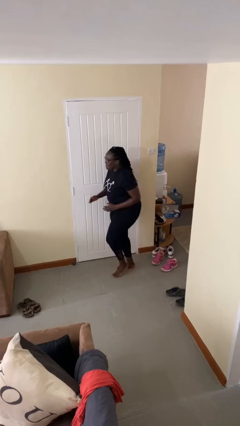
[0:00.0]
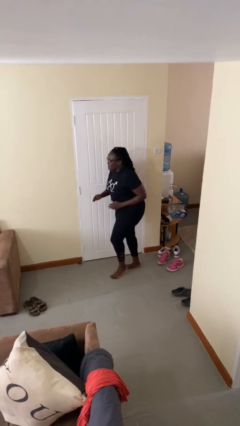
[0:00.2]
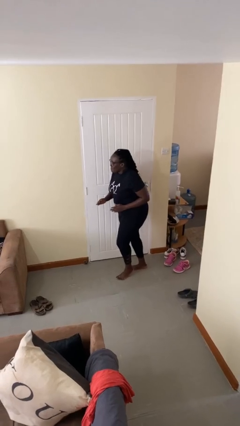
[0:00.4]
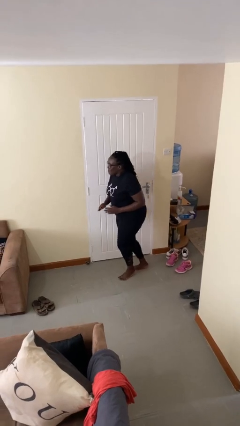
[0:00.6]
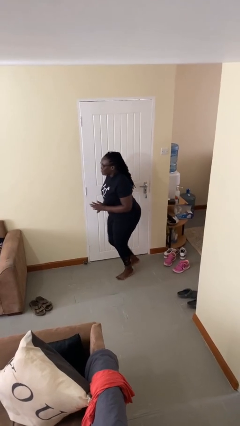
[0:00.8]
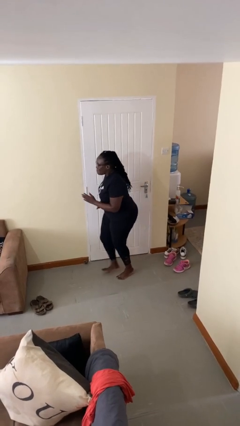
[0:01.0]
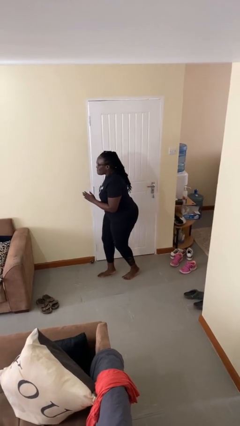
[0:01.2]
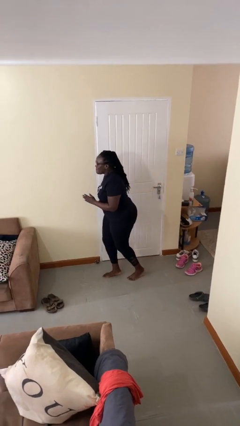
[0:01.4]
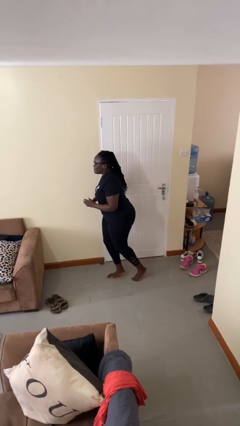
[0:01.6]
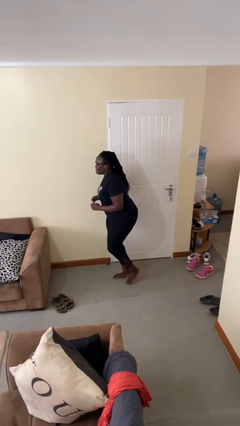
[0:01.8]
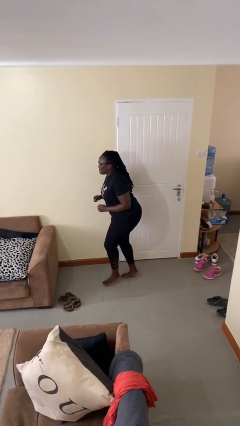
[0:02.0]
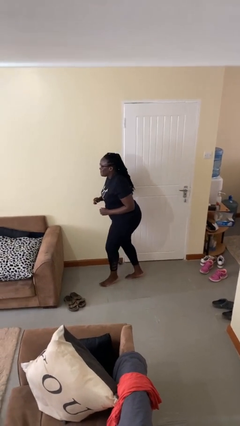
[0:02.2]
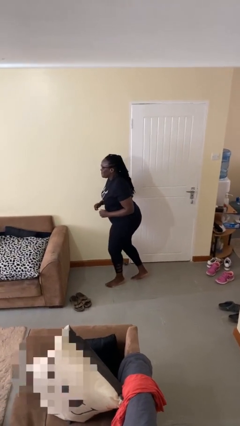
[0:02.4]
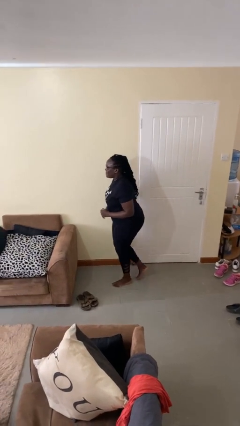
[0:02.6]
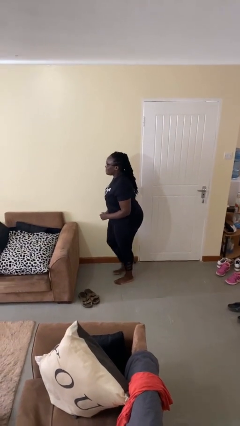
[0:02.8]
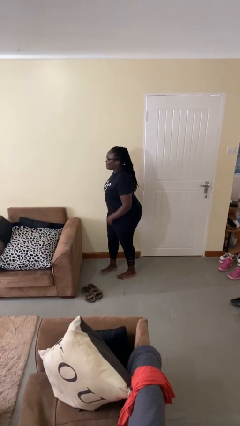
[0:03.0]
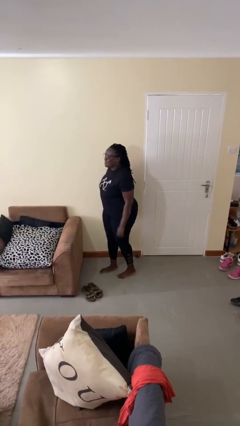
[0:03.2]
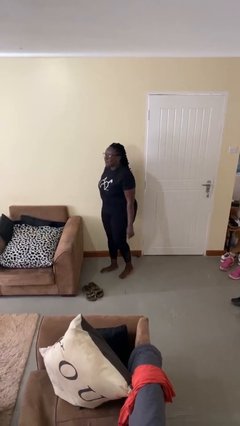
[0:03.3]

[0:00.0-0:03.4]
person walks tiptoe

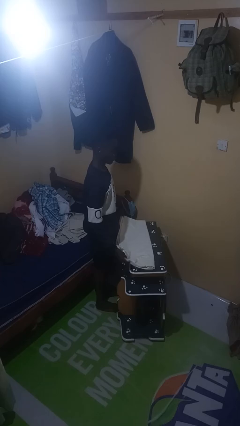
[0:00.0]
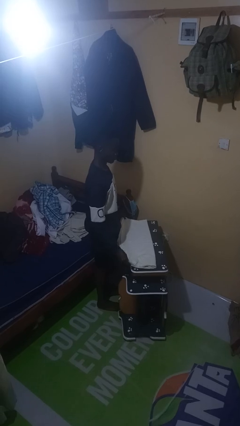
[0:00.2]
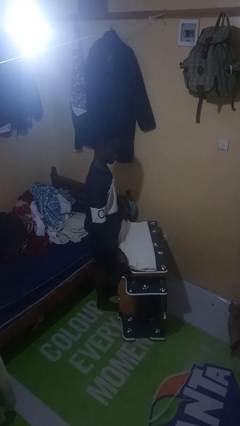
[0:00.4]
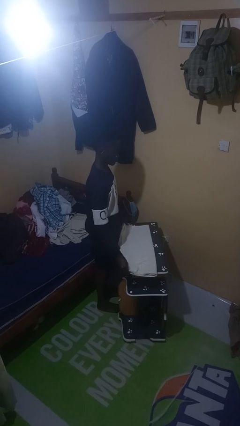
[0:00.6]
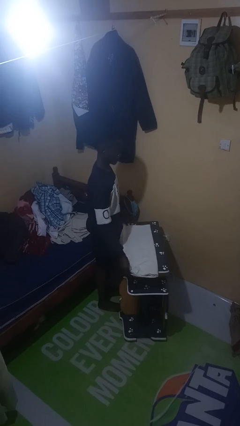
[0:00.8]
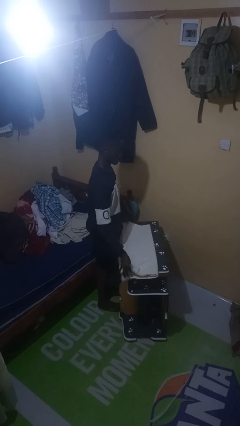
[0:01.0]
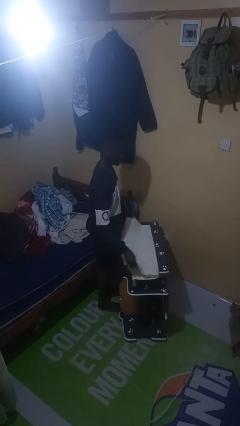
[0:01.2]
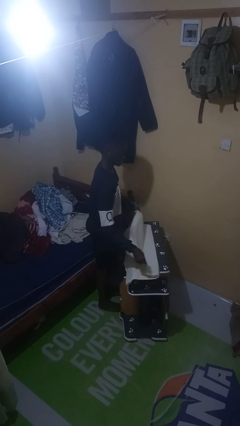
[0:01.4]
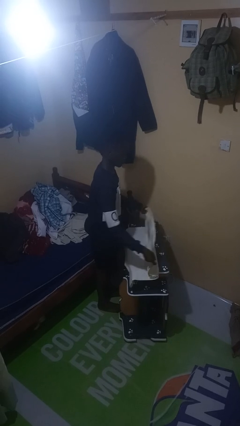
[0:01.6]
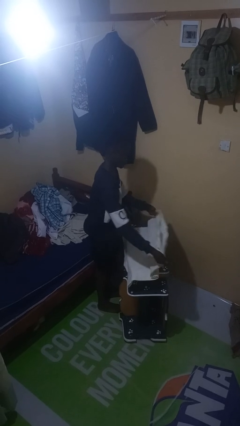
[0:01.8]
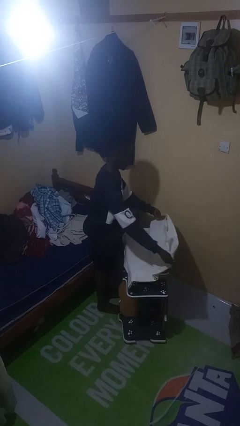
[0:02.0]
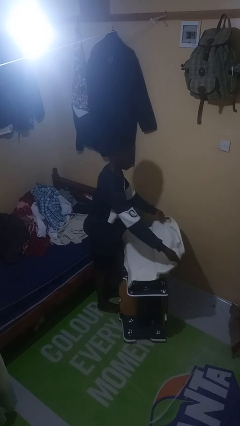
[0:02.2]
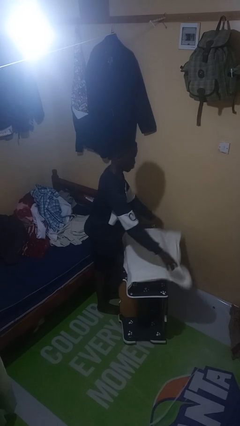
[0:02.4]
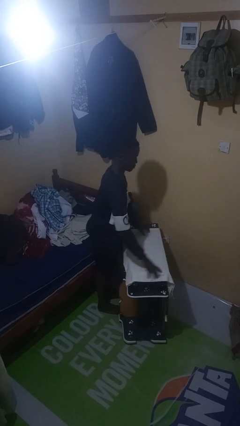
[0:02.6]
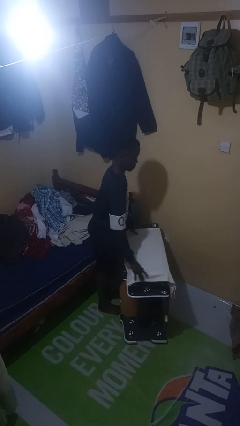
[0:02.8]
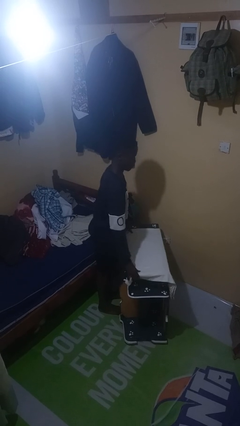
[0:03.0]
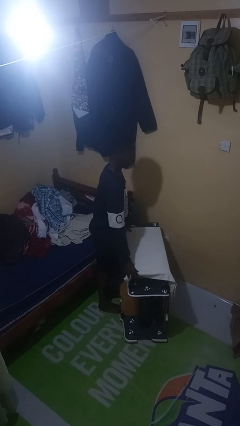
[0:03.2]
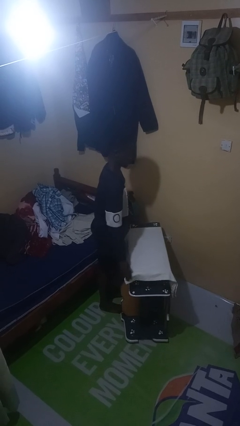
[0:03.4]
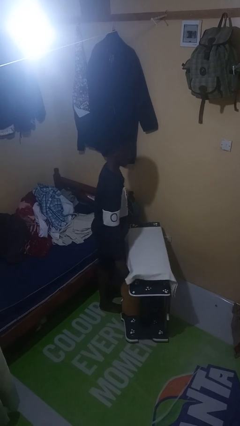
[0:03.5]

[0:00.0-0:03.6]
person spreads tablecloth

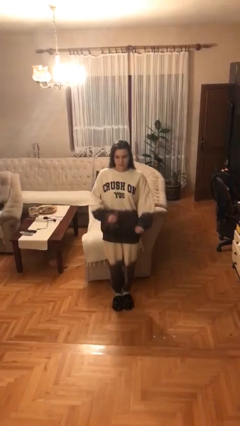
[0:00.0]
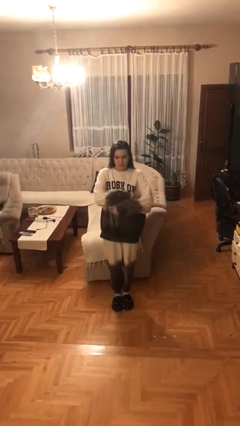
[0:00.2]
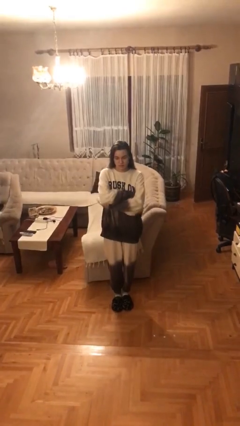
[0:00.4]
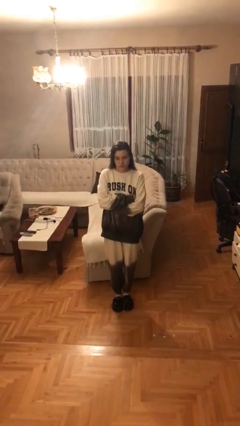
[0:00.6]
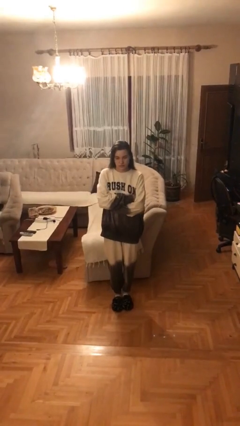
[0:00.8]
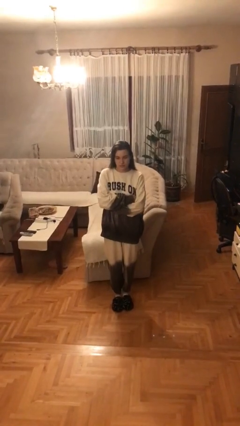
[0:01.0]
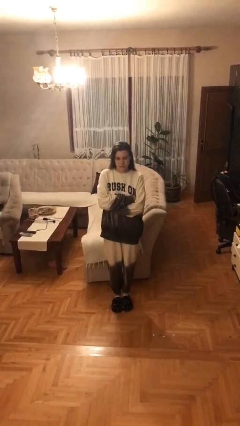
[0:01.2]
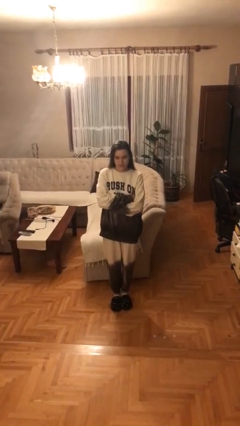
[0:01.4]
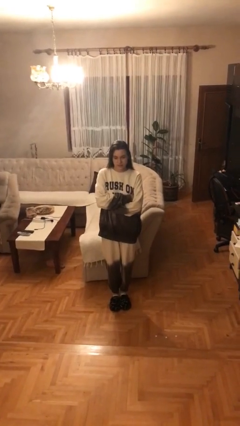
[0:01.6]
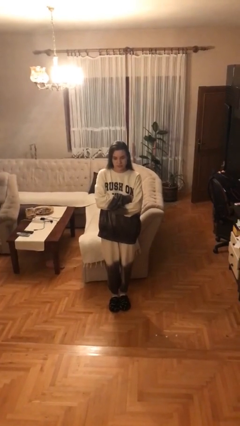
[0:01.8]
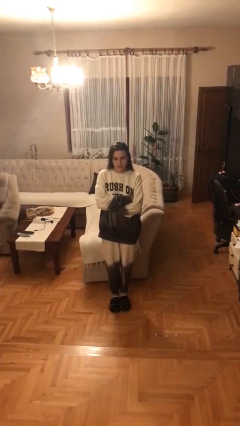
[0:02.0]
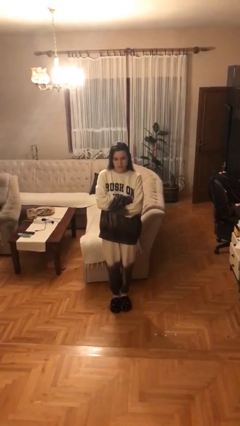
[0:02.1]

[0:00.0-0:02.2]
person crosses arms

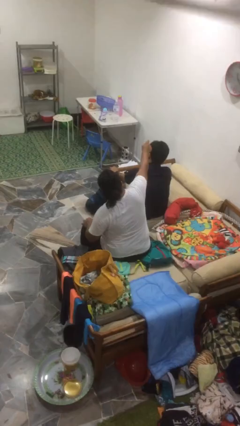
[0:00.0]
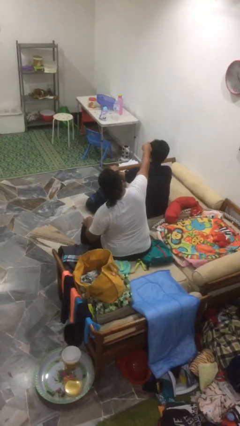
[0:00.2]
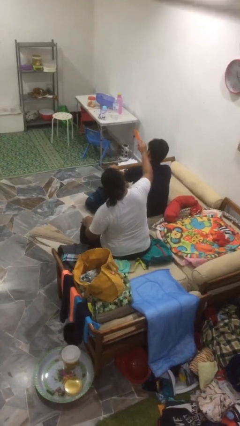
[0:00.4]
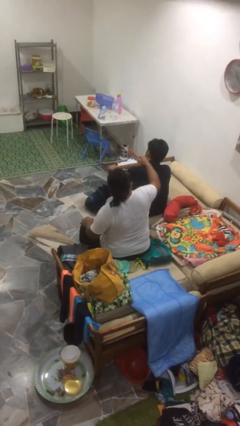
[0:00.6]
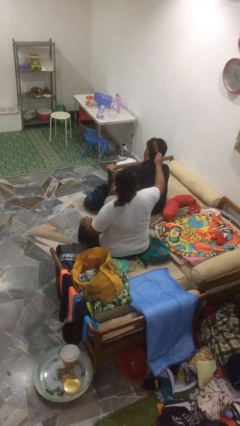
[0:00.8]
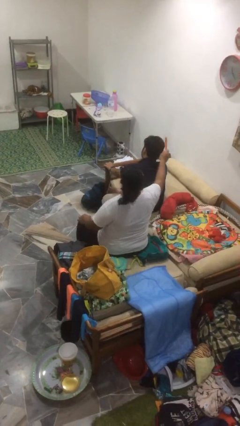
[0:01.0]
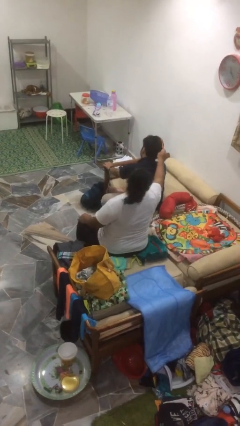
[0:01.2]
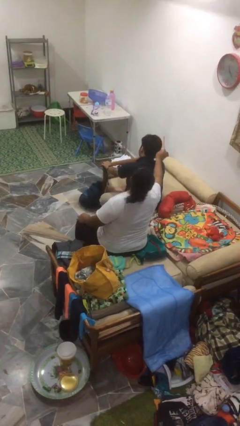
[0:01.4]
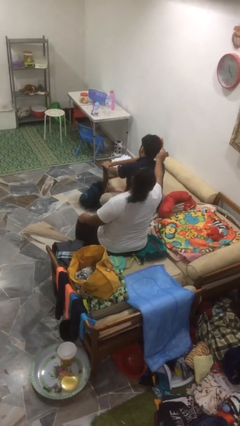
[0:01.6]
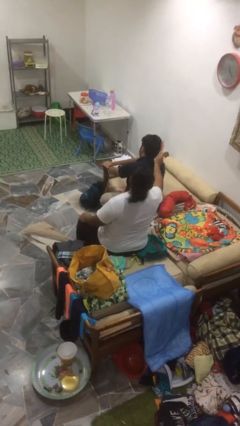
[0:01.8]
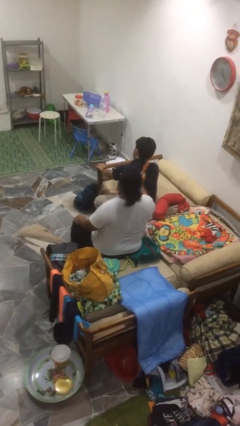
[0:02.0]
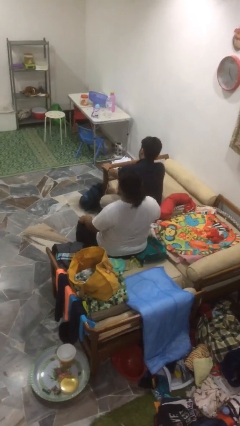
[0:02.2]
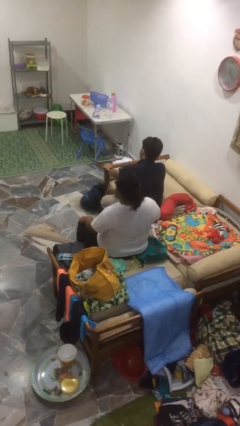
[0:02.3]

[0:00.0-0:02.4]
person brushes hair of person

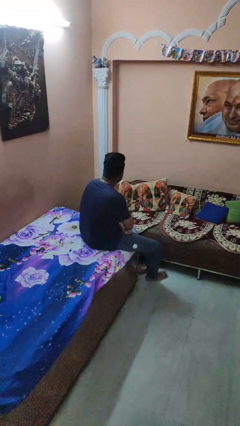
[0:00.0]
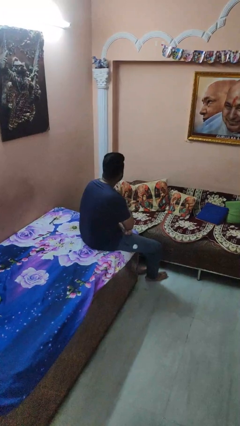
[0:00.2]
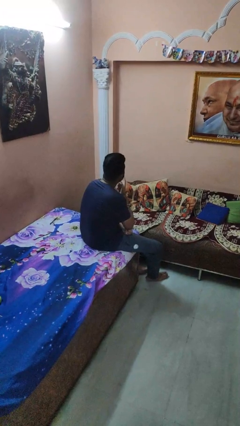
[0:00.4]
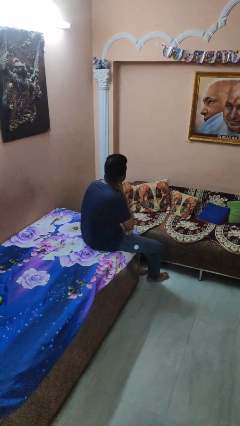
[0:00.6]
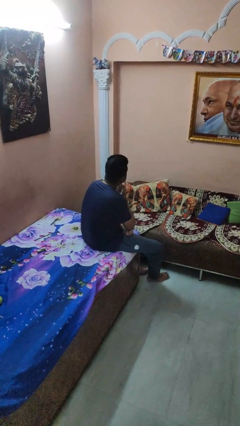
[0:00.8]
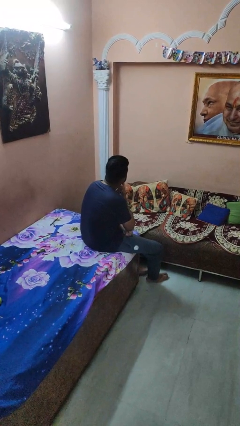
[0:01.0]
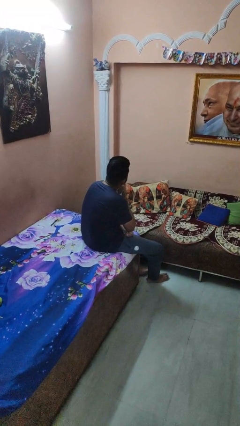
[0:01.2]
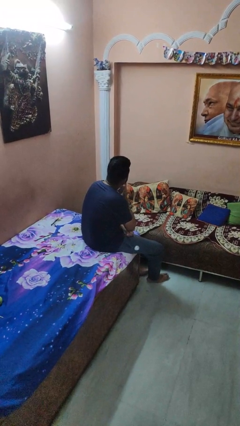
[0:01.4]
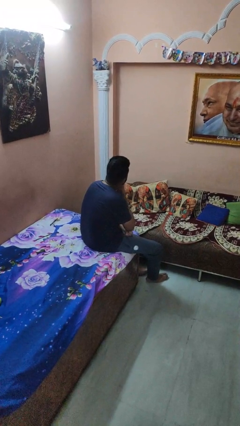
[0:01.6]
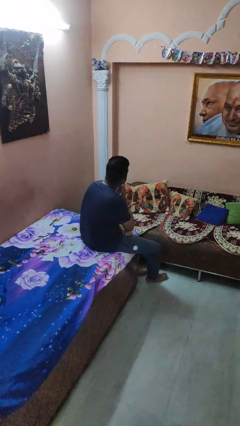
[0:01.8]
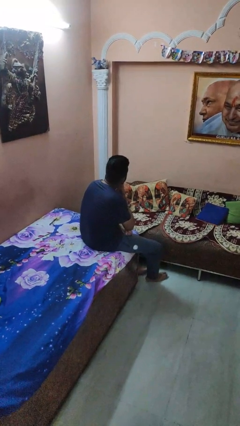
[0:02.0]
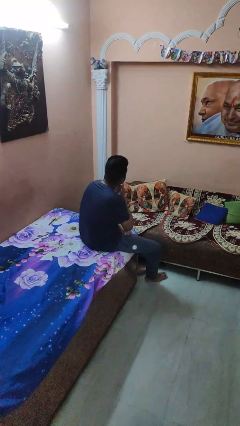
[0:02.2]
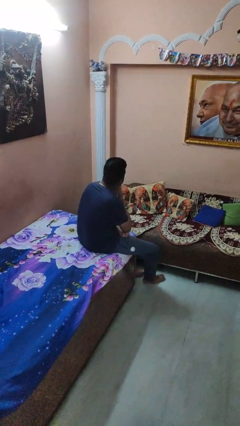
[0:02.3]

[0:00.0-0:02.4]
person strokes chin

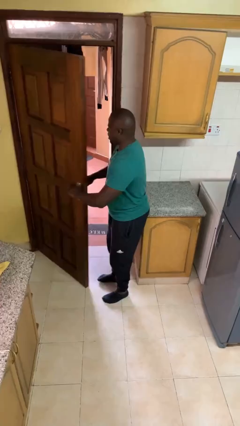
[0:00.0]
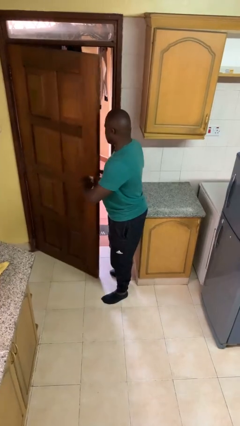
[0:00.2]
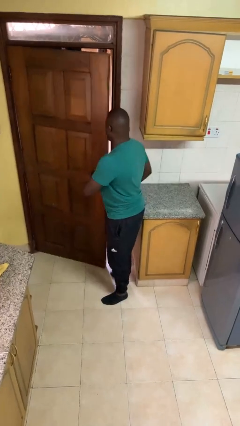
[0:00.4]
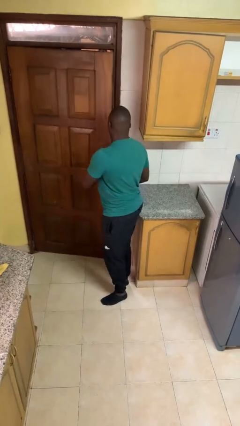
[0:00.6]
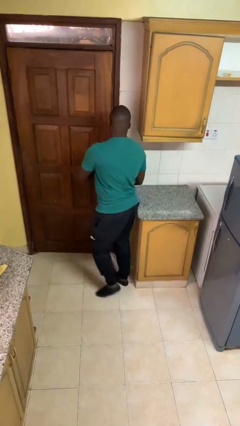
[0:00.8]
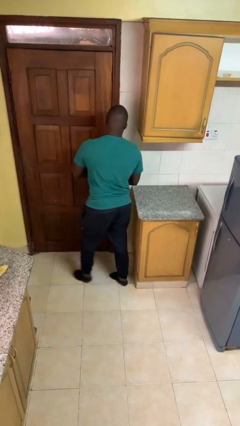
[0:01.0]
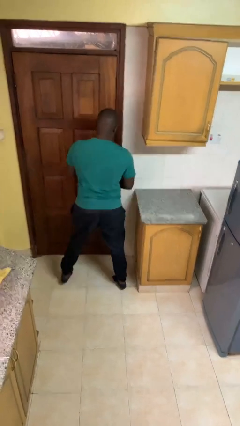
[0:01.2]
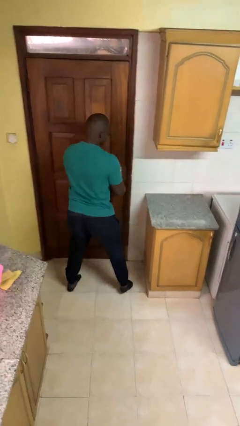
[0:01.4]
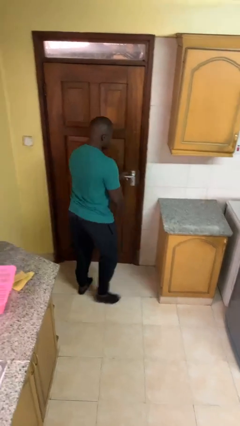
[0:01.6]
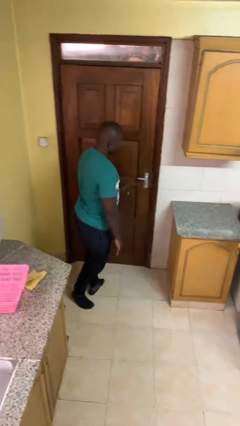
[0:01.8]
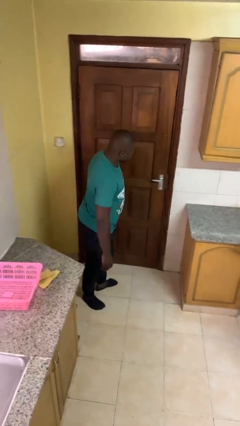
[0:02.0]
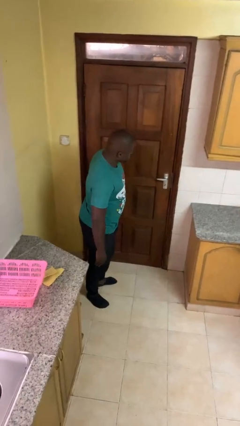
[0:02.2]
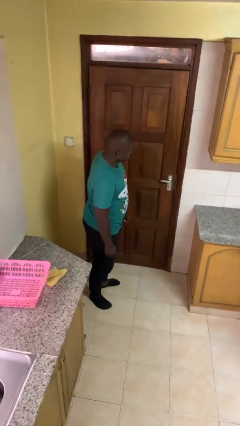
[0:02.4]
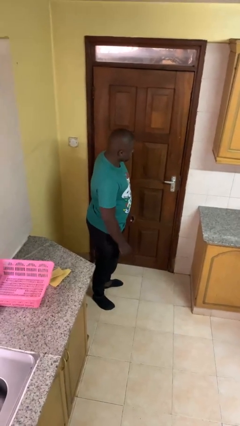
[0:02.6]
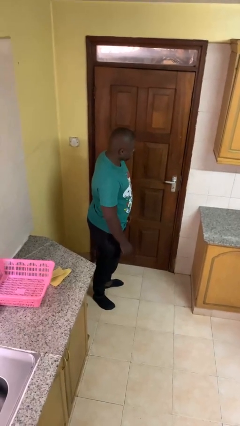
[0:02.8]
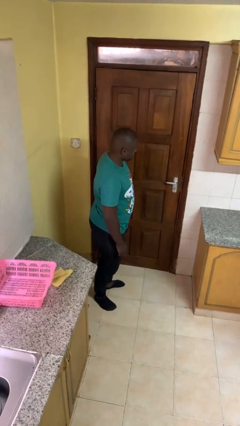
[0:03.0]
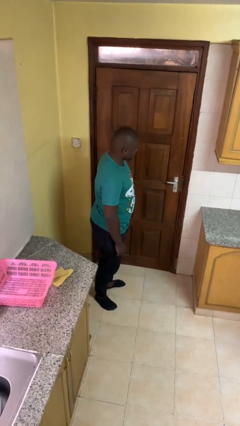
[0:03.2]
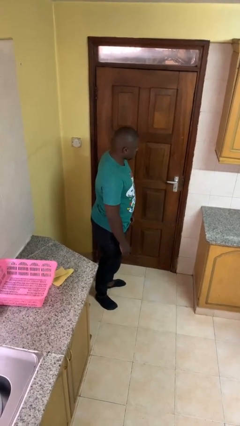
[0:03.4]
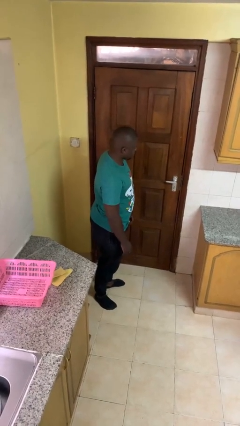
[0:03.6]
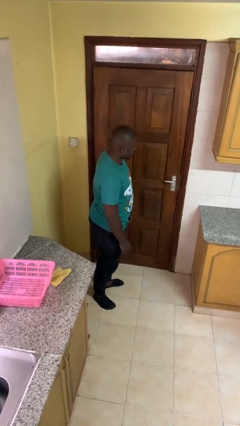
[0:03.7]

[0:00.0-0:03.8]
person closes facility door
